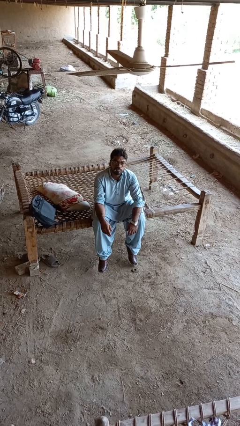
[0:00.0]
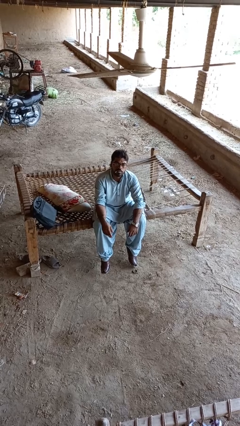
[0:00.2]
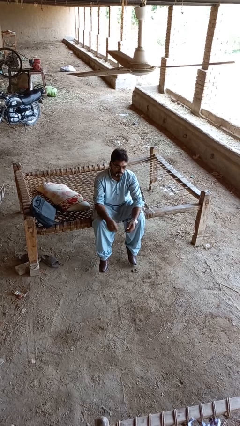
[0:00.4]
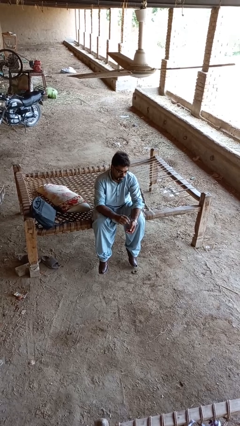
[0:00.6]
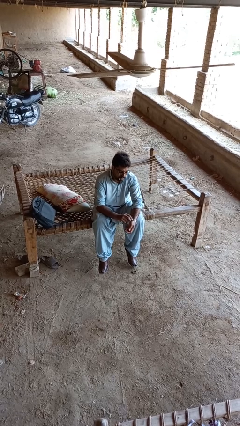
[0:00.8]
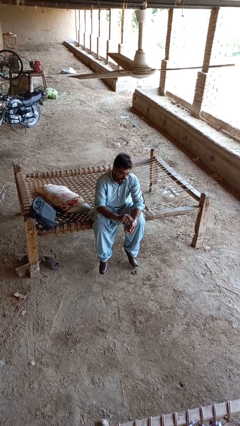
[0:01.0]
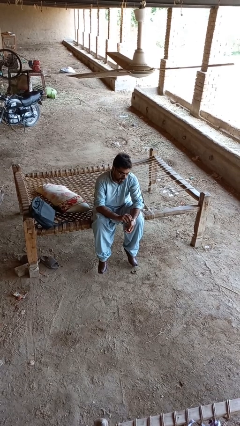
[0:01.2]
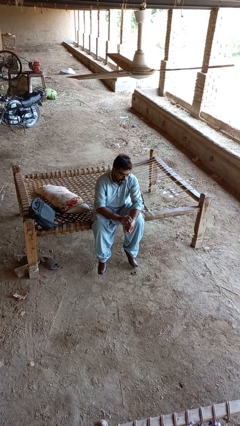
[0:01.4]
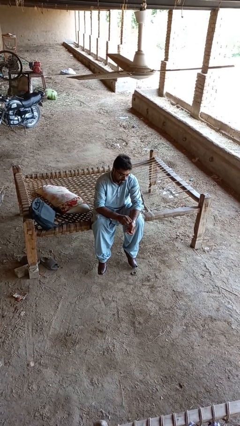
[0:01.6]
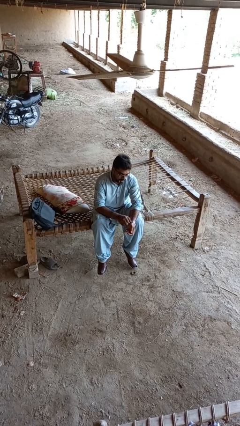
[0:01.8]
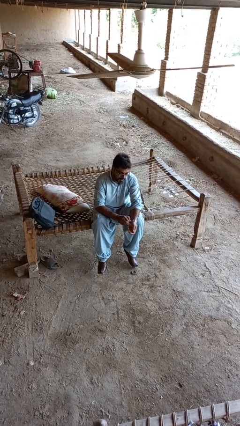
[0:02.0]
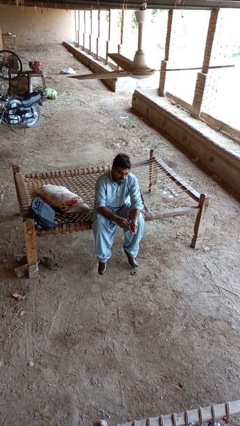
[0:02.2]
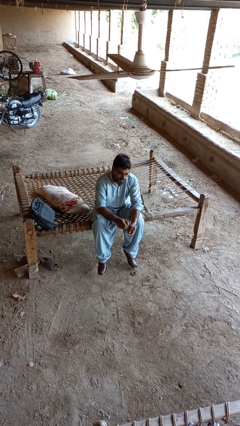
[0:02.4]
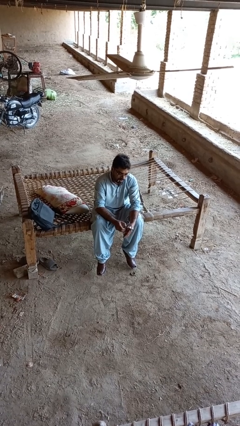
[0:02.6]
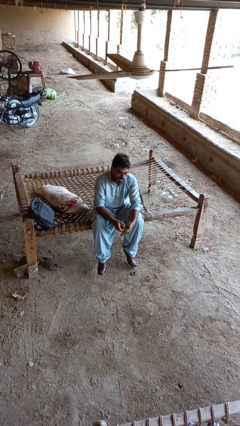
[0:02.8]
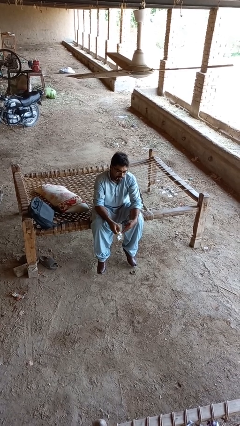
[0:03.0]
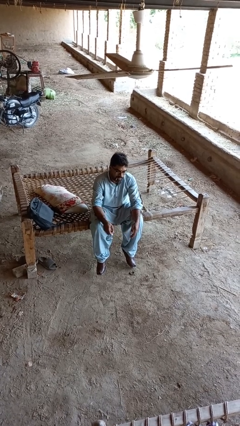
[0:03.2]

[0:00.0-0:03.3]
person takes off wristwatch

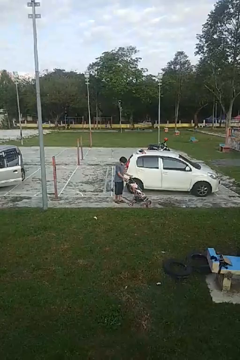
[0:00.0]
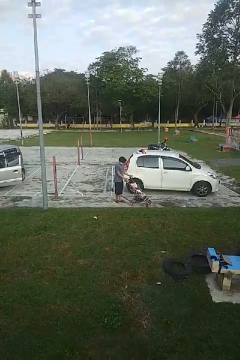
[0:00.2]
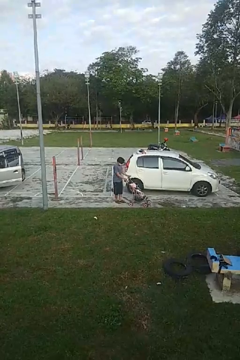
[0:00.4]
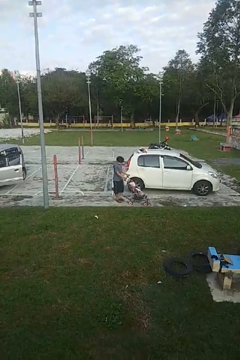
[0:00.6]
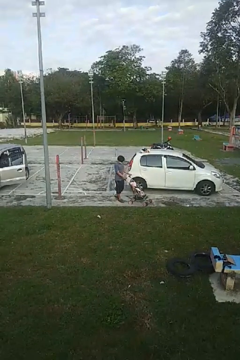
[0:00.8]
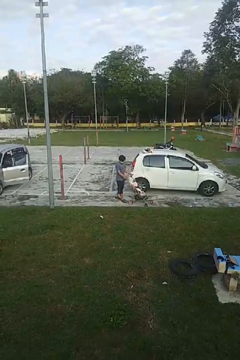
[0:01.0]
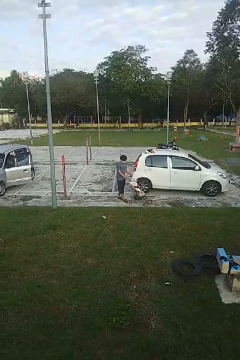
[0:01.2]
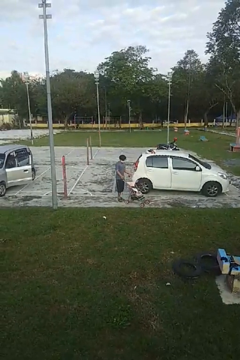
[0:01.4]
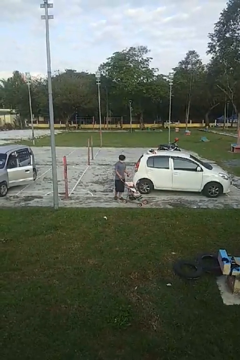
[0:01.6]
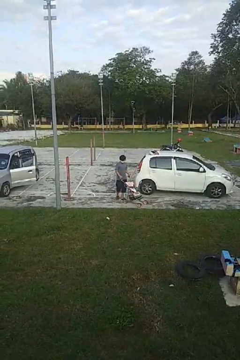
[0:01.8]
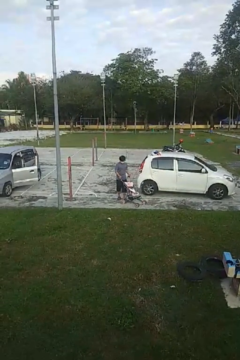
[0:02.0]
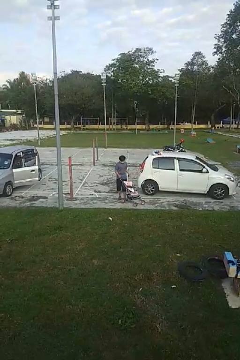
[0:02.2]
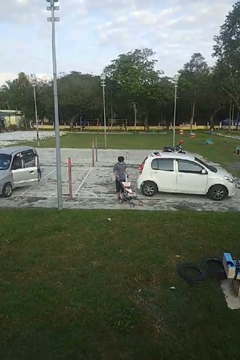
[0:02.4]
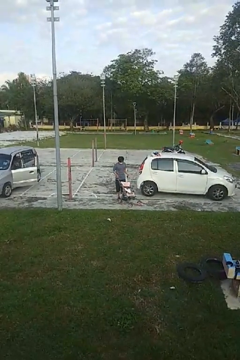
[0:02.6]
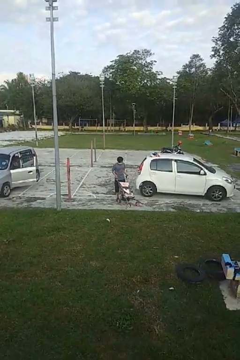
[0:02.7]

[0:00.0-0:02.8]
person pulls wheeled cart

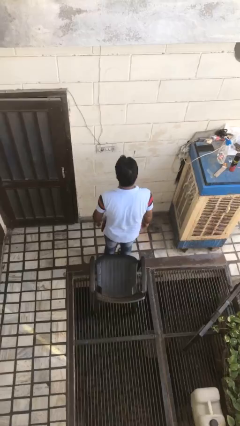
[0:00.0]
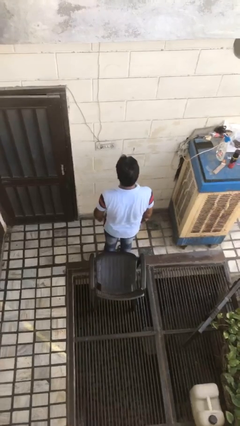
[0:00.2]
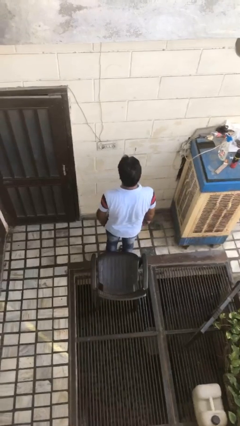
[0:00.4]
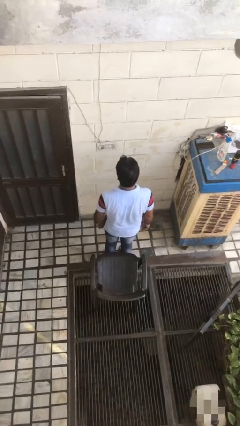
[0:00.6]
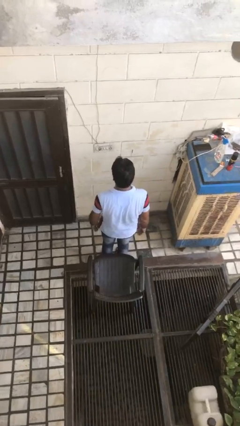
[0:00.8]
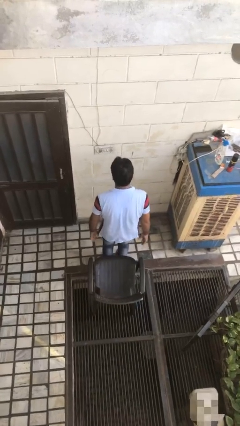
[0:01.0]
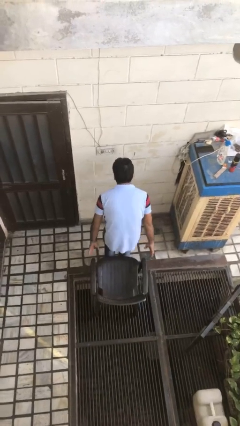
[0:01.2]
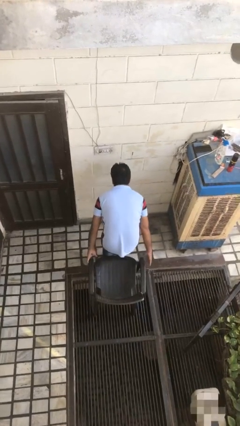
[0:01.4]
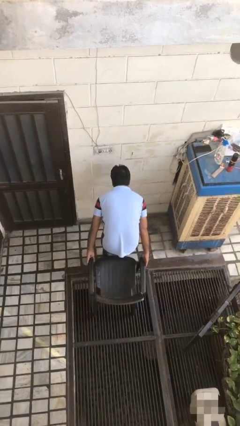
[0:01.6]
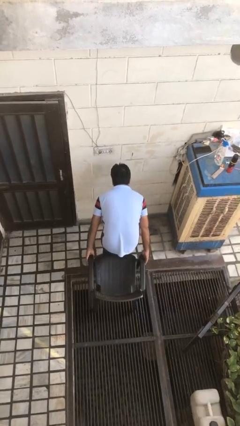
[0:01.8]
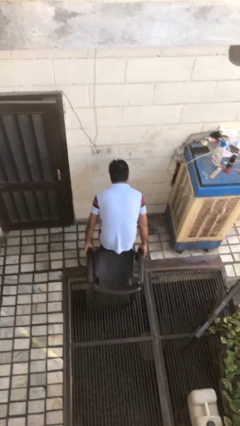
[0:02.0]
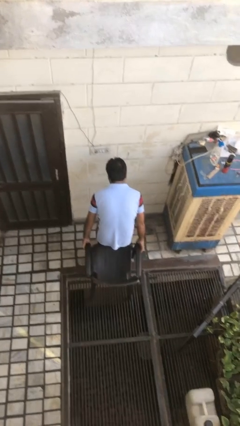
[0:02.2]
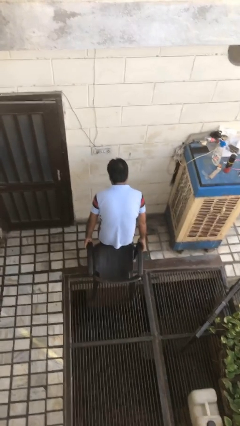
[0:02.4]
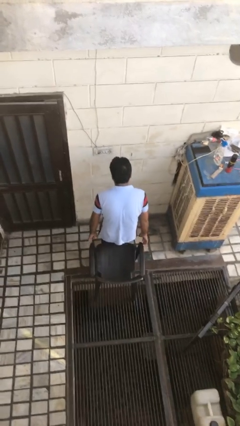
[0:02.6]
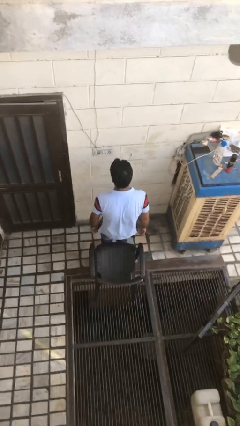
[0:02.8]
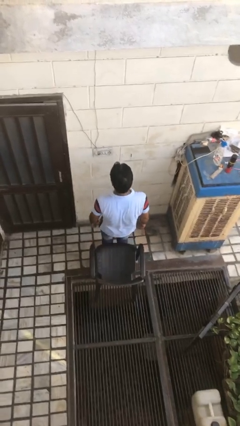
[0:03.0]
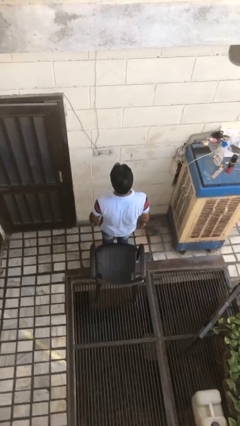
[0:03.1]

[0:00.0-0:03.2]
person pulls out chair

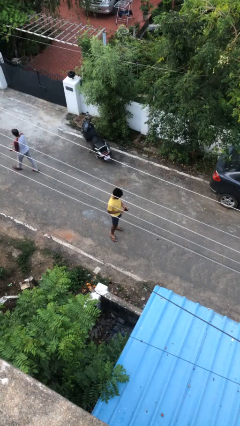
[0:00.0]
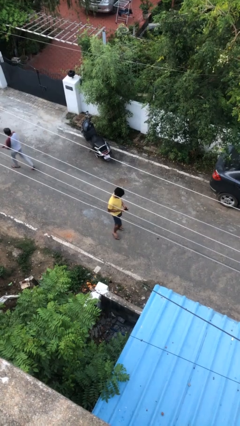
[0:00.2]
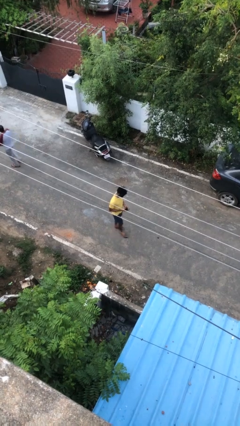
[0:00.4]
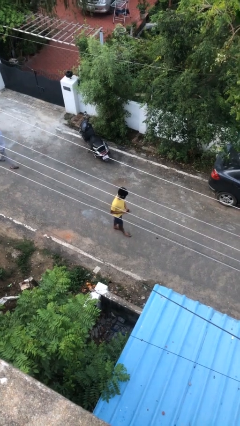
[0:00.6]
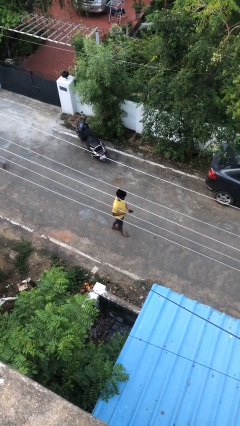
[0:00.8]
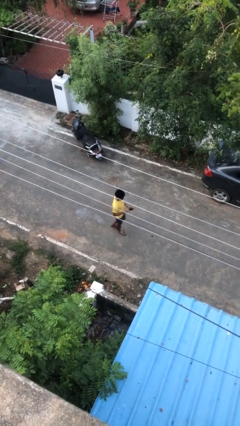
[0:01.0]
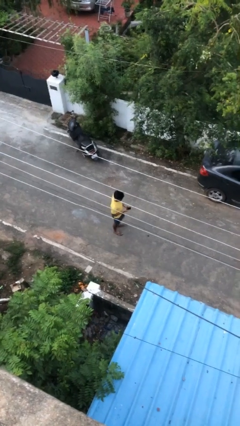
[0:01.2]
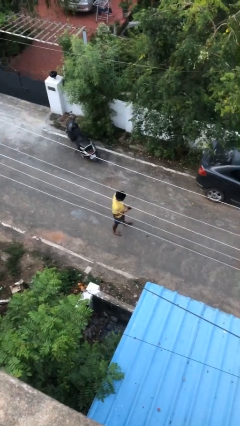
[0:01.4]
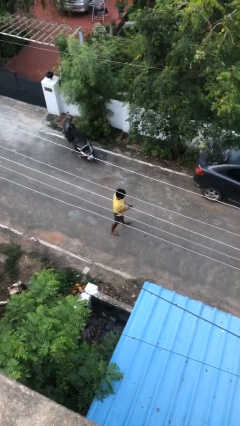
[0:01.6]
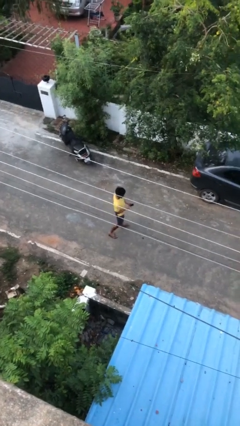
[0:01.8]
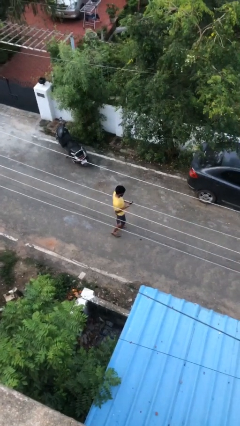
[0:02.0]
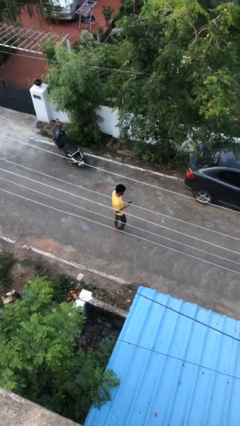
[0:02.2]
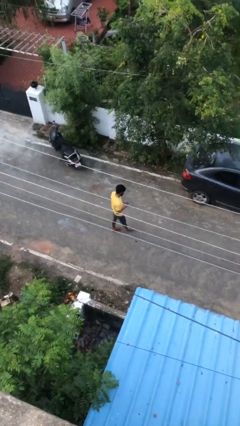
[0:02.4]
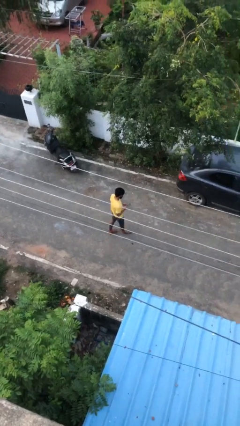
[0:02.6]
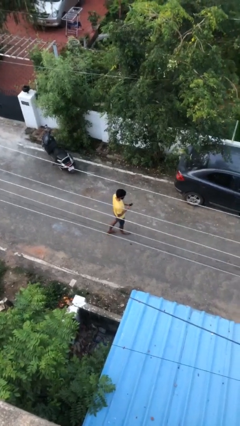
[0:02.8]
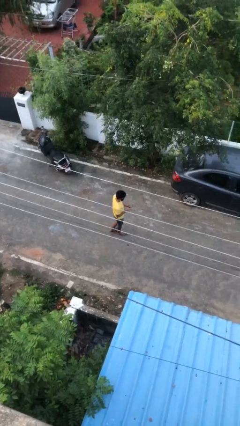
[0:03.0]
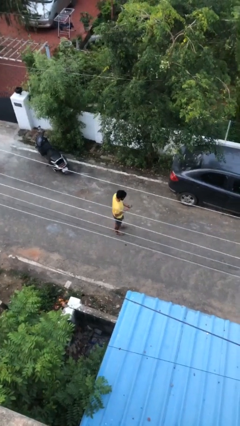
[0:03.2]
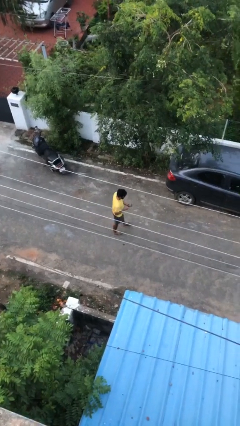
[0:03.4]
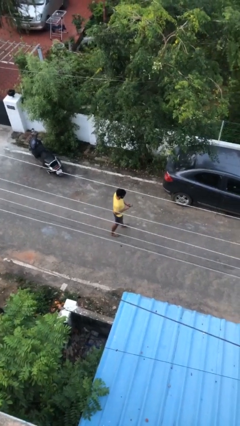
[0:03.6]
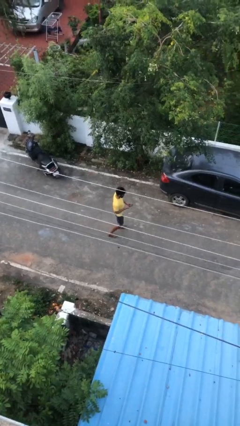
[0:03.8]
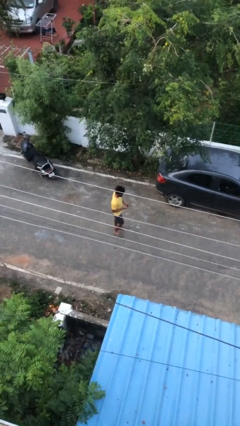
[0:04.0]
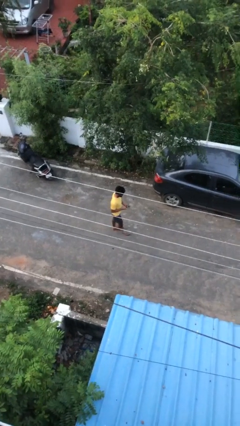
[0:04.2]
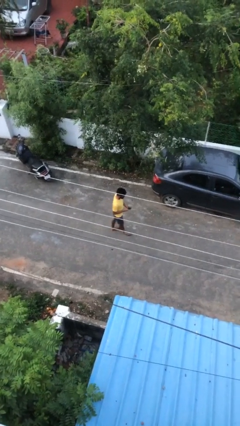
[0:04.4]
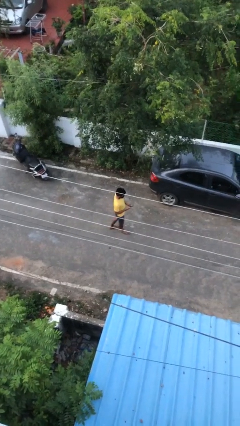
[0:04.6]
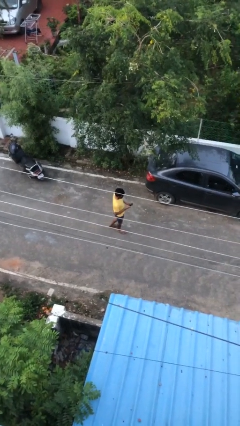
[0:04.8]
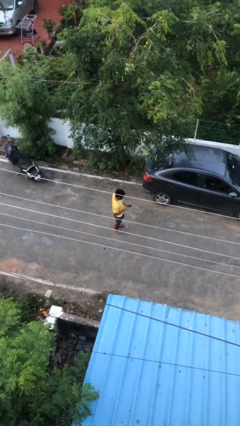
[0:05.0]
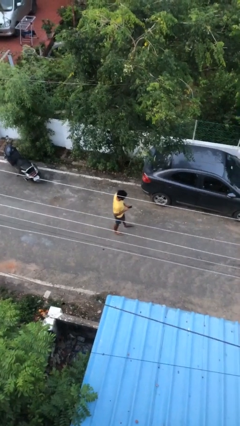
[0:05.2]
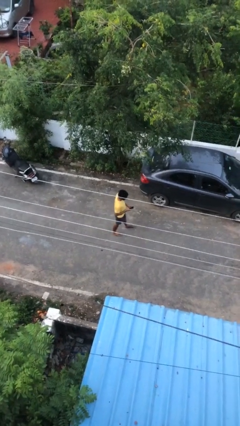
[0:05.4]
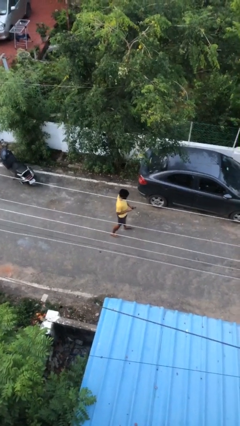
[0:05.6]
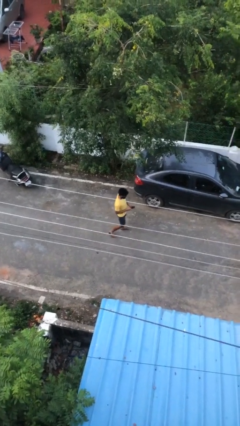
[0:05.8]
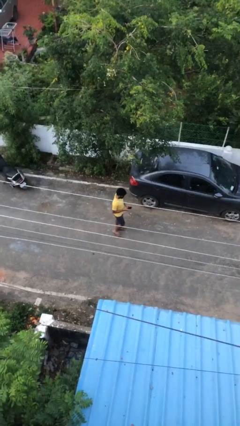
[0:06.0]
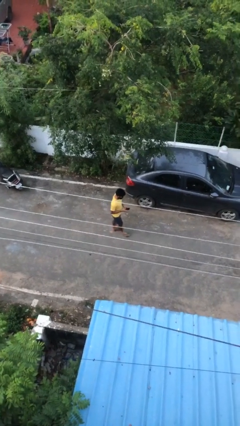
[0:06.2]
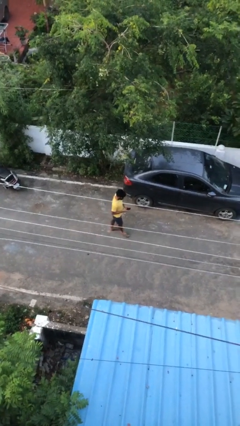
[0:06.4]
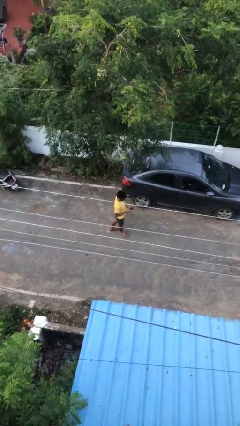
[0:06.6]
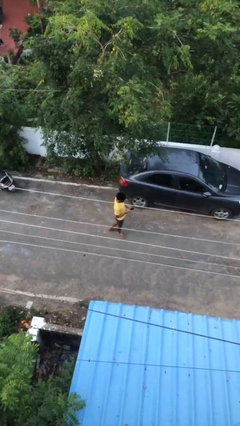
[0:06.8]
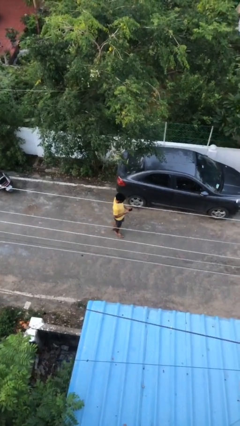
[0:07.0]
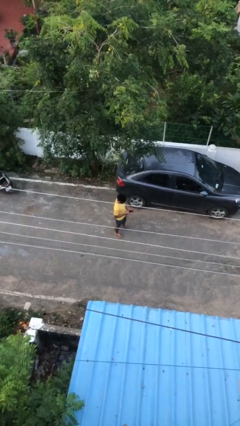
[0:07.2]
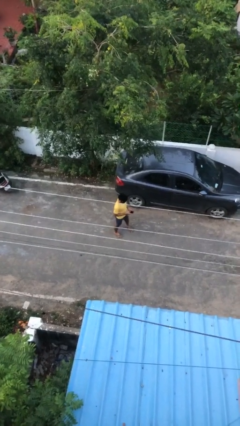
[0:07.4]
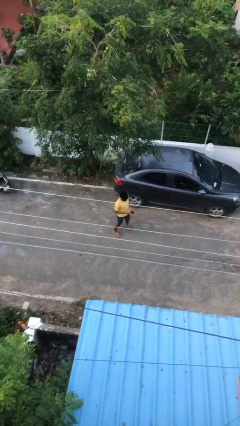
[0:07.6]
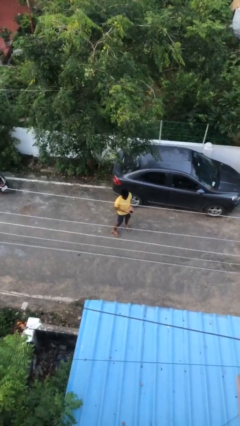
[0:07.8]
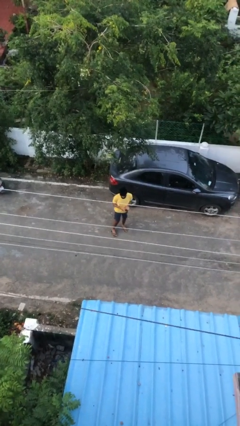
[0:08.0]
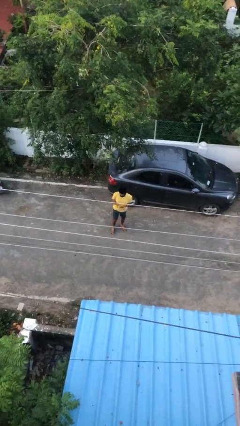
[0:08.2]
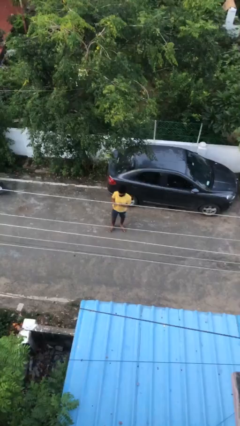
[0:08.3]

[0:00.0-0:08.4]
person texts on phone

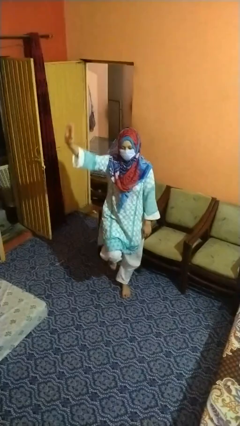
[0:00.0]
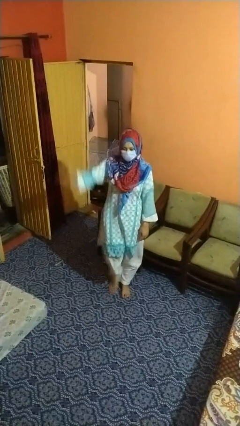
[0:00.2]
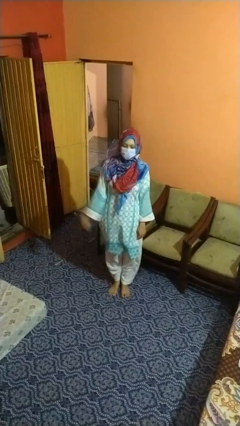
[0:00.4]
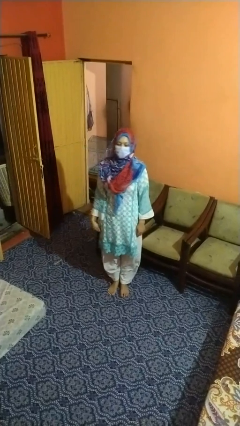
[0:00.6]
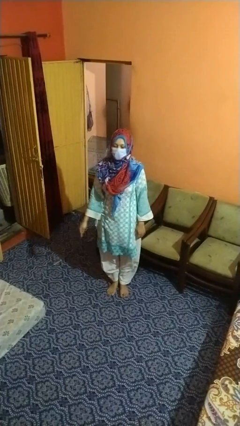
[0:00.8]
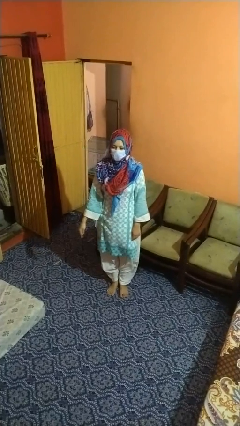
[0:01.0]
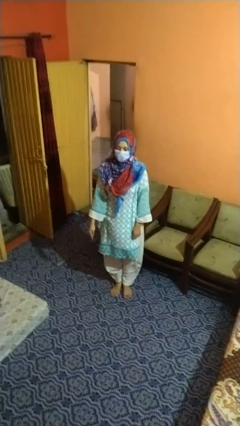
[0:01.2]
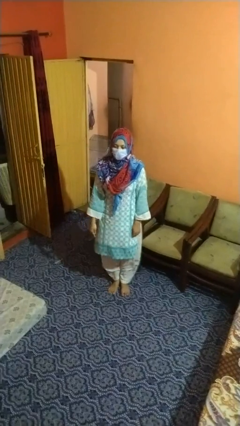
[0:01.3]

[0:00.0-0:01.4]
person salutes
